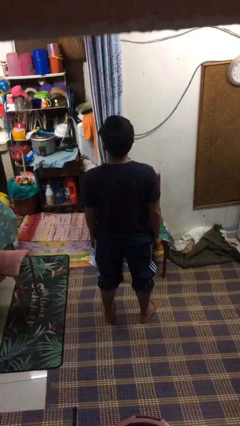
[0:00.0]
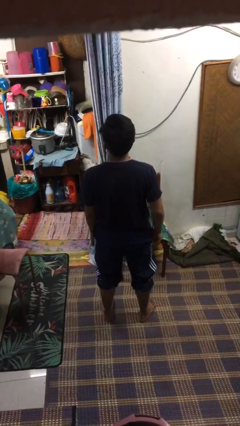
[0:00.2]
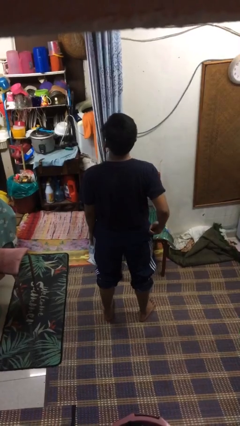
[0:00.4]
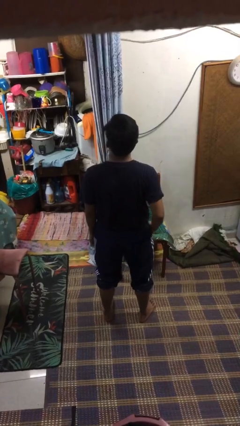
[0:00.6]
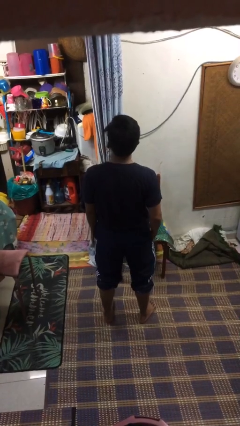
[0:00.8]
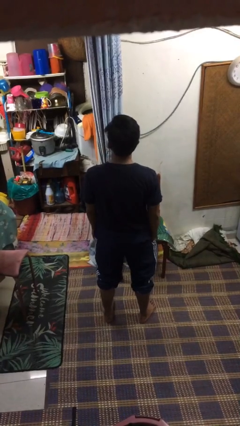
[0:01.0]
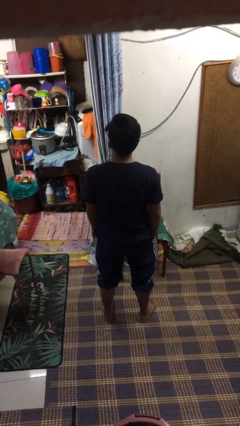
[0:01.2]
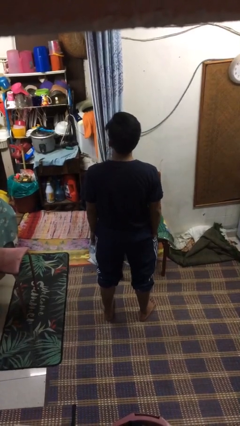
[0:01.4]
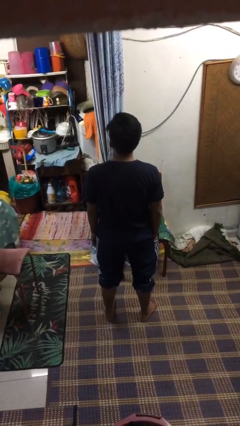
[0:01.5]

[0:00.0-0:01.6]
person puts hands in back pockets

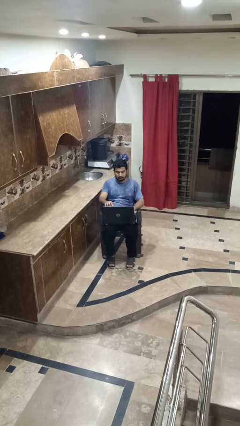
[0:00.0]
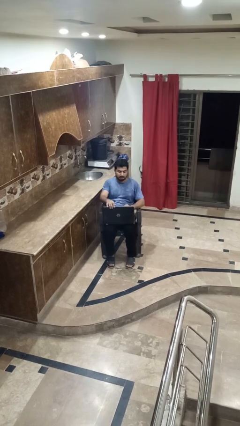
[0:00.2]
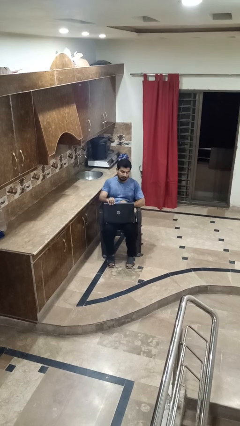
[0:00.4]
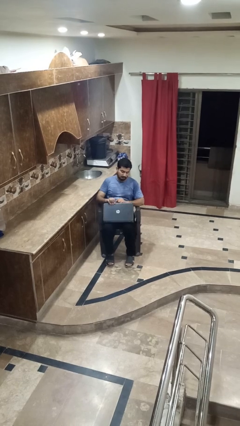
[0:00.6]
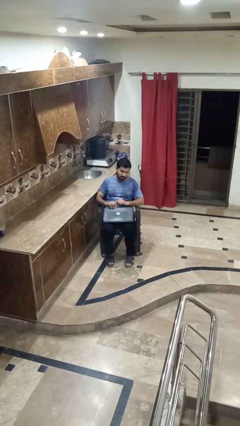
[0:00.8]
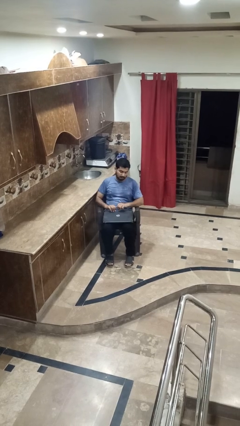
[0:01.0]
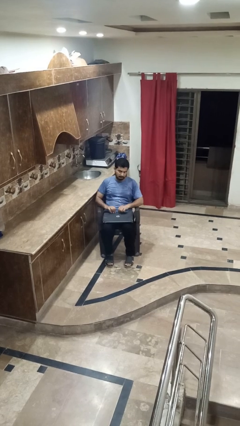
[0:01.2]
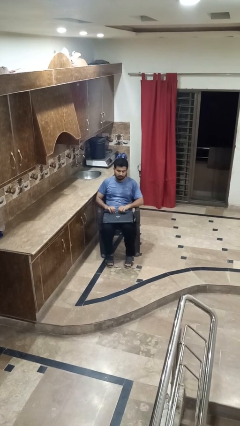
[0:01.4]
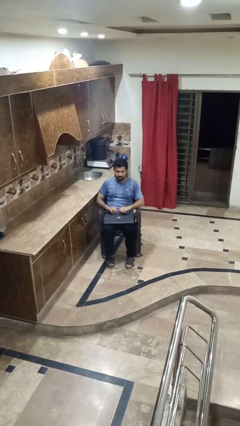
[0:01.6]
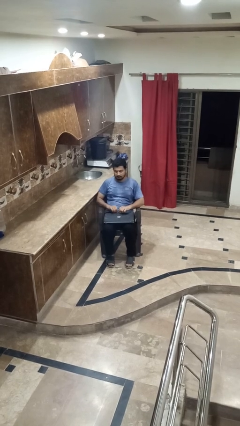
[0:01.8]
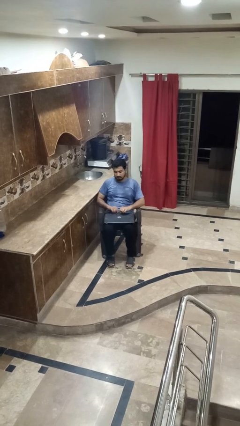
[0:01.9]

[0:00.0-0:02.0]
person closes laptop

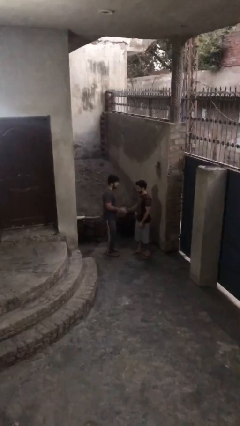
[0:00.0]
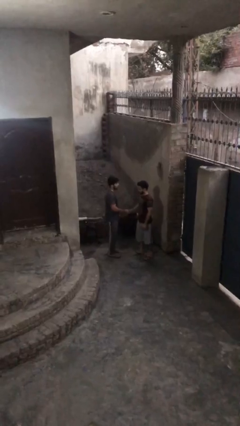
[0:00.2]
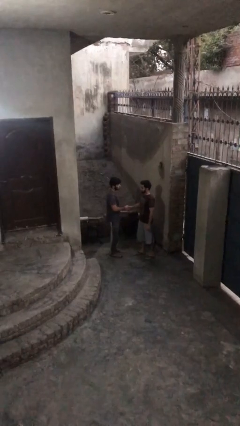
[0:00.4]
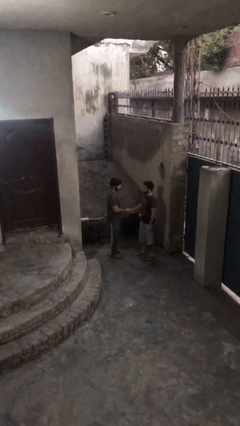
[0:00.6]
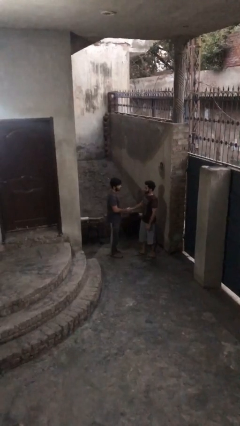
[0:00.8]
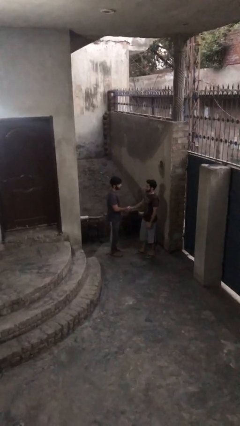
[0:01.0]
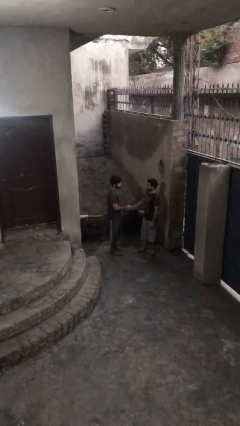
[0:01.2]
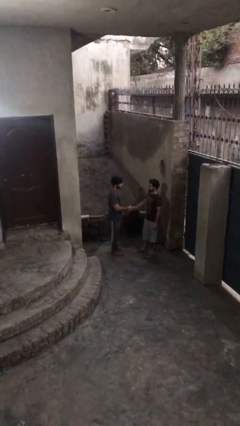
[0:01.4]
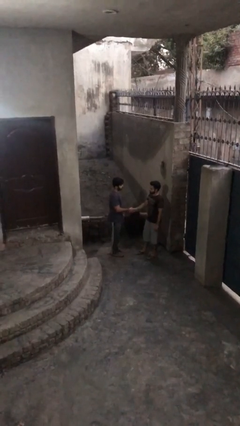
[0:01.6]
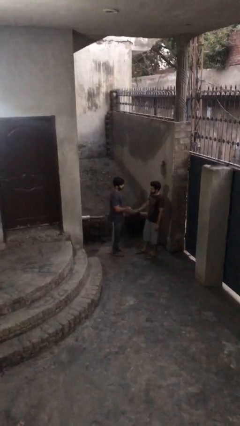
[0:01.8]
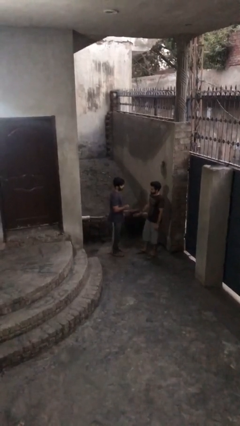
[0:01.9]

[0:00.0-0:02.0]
person shakes hand

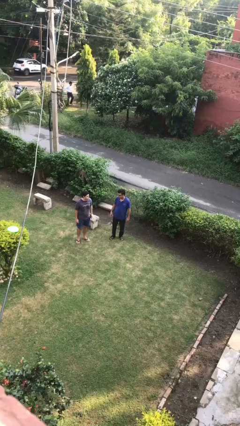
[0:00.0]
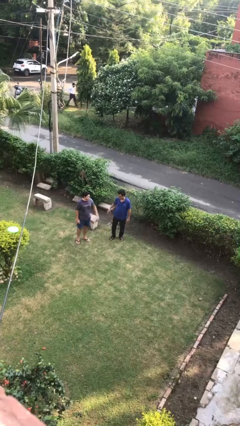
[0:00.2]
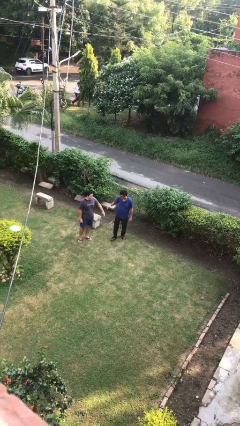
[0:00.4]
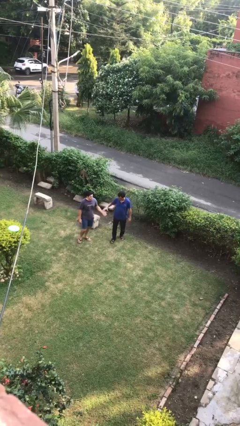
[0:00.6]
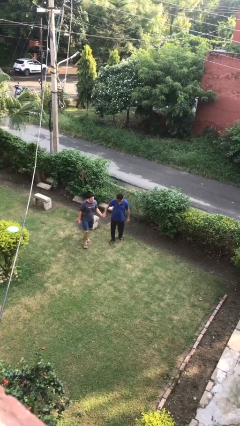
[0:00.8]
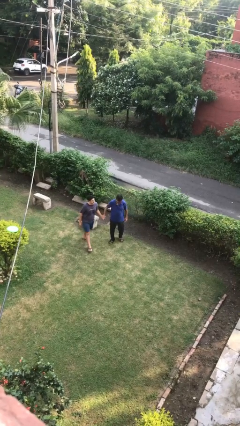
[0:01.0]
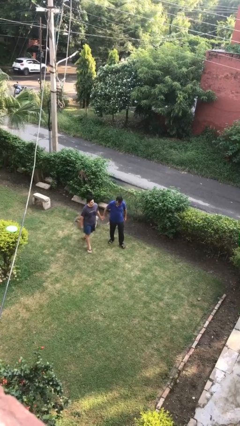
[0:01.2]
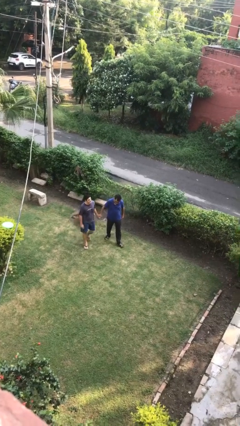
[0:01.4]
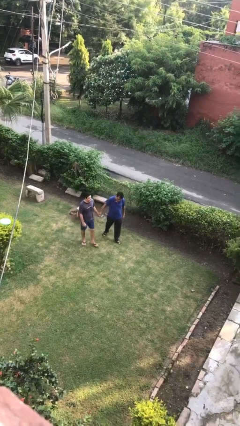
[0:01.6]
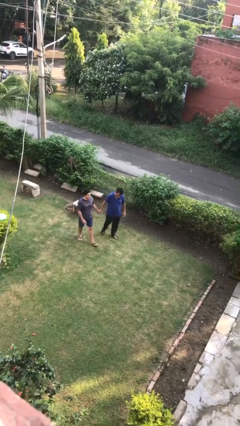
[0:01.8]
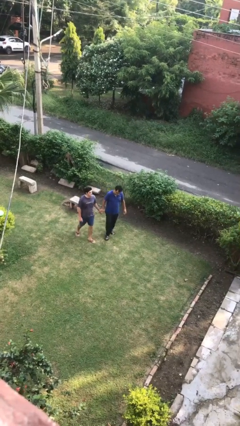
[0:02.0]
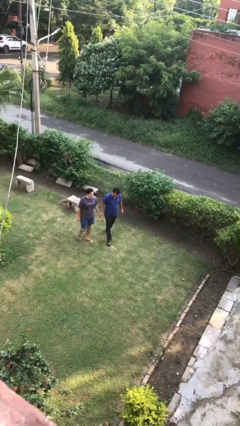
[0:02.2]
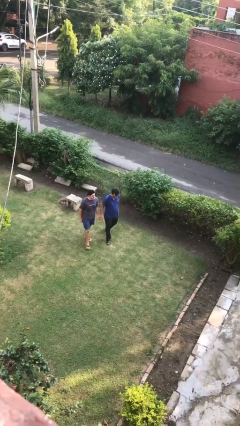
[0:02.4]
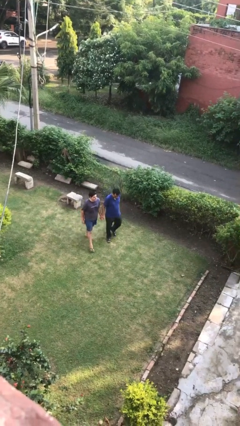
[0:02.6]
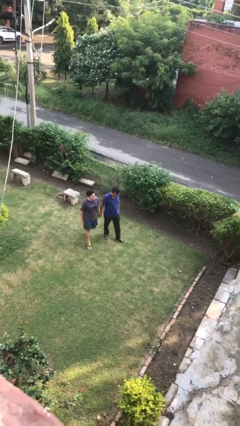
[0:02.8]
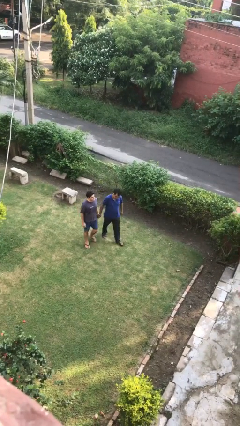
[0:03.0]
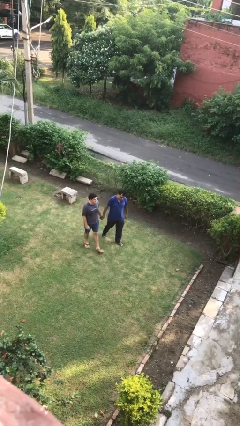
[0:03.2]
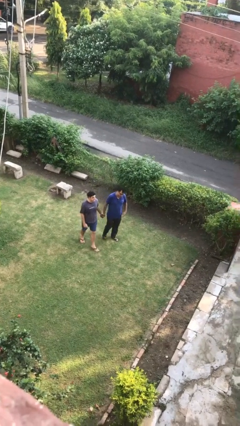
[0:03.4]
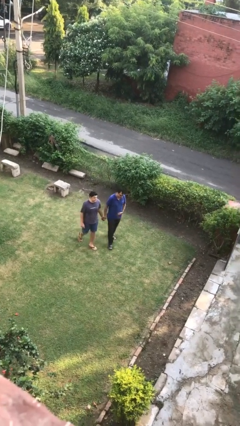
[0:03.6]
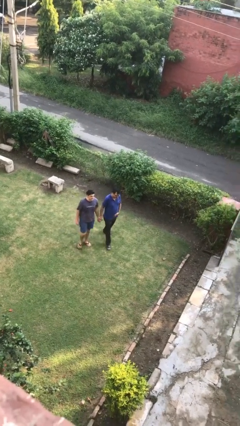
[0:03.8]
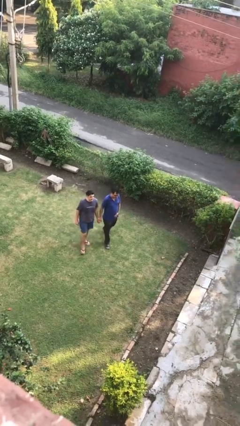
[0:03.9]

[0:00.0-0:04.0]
person holds hand

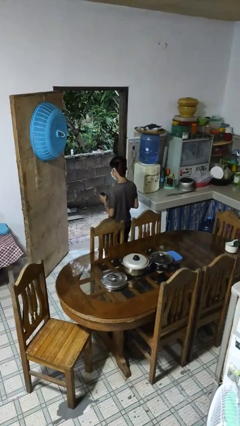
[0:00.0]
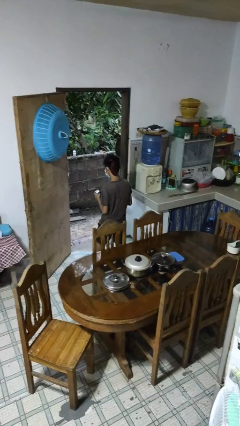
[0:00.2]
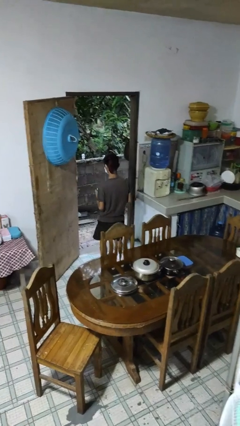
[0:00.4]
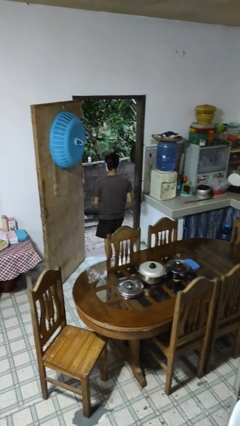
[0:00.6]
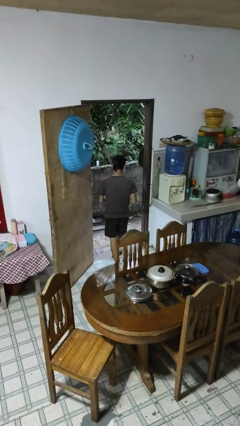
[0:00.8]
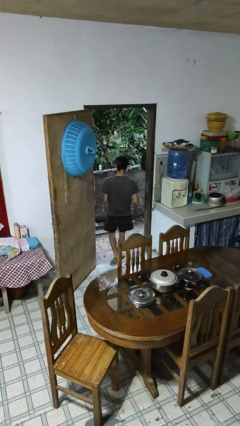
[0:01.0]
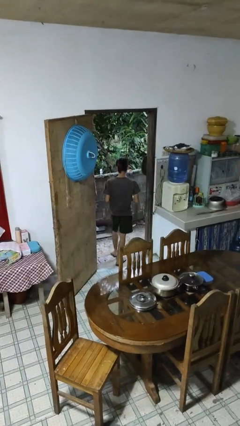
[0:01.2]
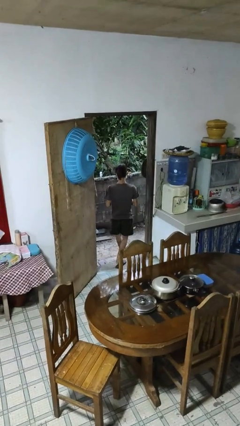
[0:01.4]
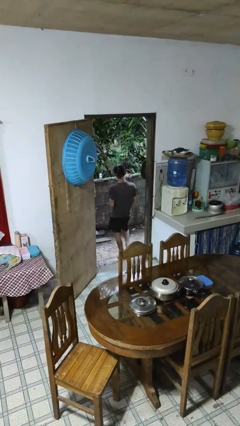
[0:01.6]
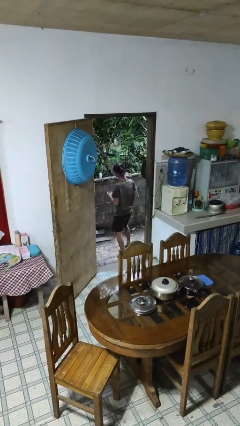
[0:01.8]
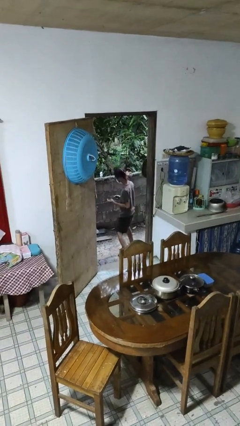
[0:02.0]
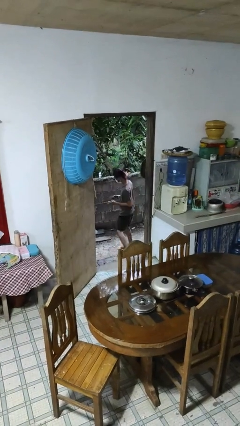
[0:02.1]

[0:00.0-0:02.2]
person exits scene through structure

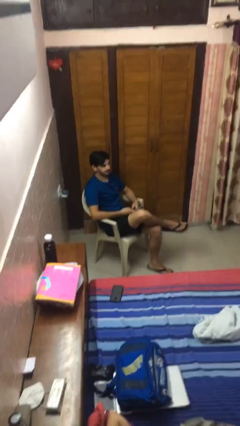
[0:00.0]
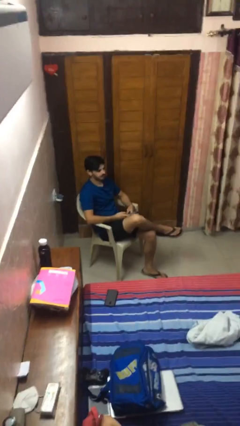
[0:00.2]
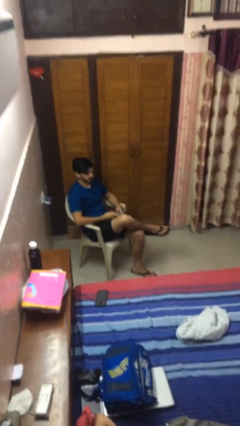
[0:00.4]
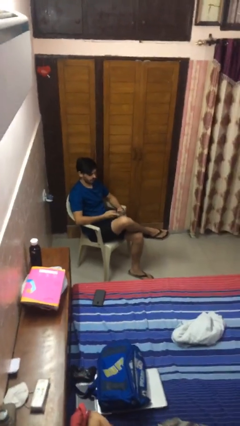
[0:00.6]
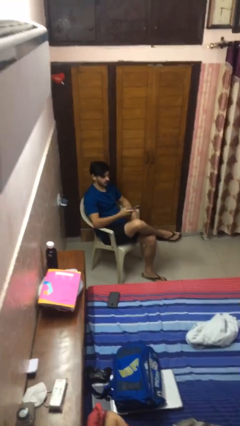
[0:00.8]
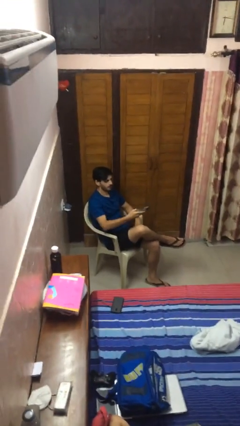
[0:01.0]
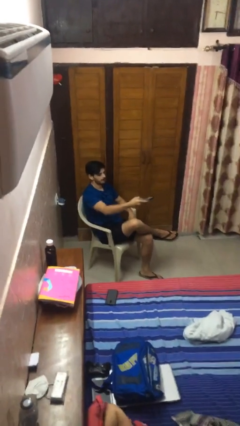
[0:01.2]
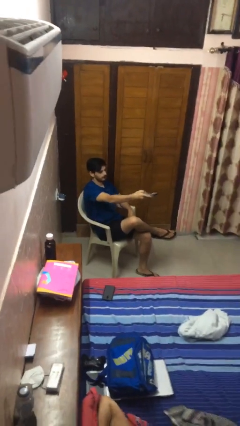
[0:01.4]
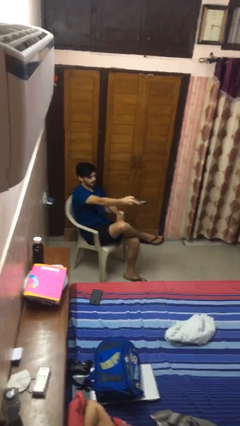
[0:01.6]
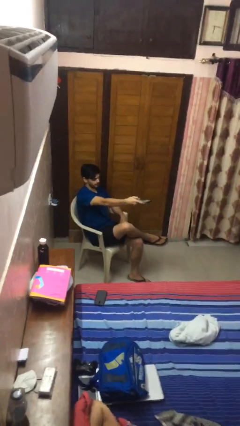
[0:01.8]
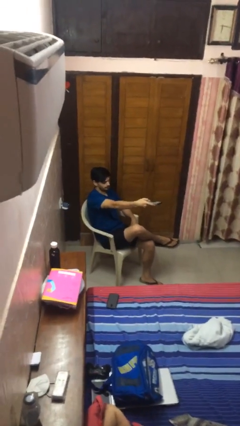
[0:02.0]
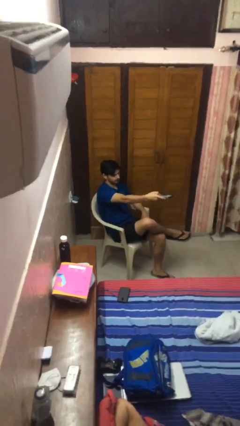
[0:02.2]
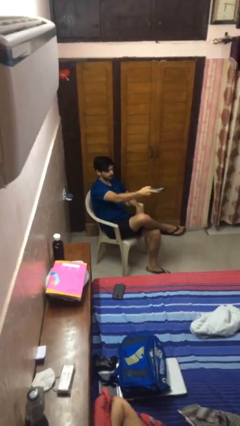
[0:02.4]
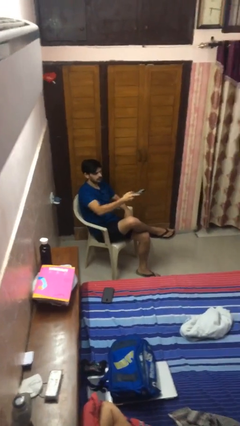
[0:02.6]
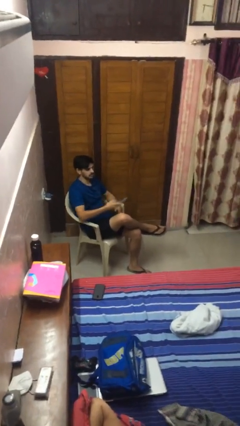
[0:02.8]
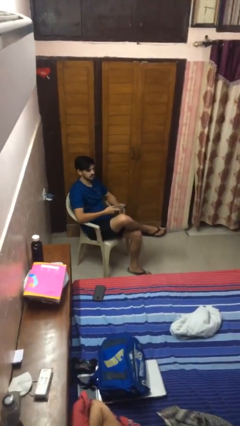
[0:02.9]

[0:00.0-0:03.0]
person uses television remote

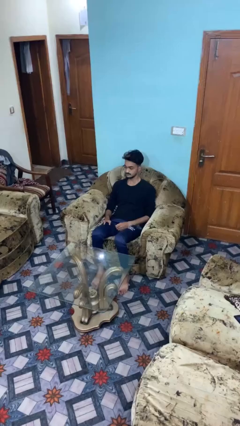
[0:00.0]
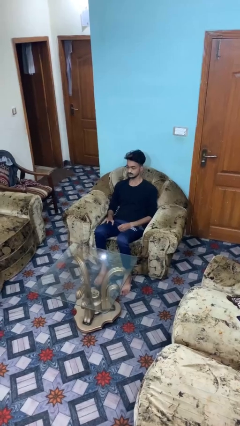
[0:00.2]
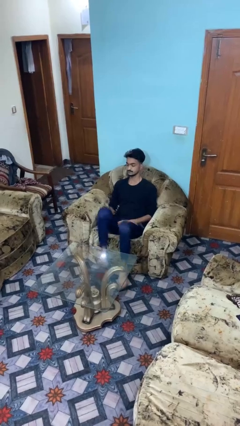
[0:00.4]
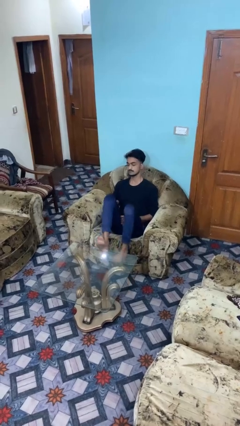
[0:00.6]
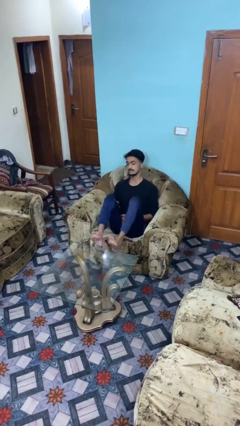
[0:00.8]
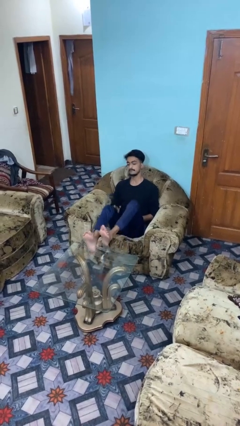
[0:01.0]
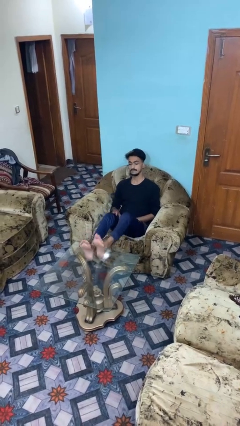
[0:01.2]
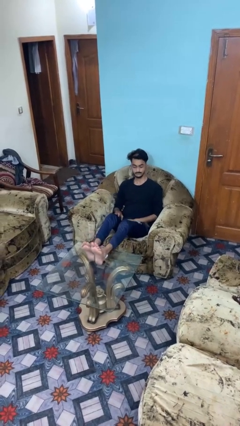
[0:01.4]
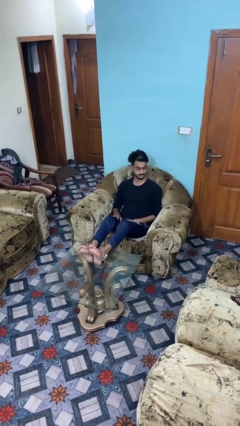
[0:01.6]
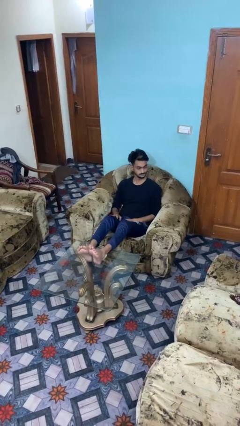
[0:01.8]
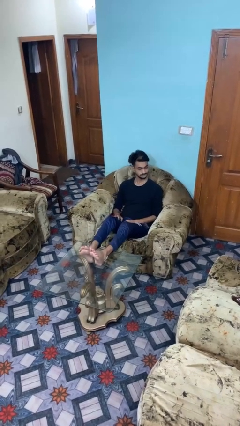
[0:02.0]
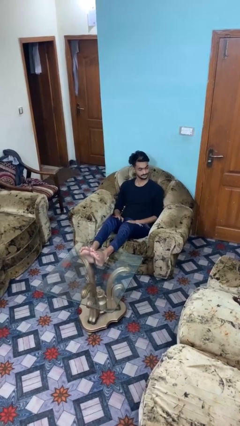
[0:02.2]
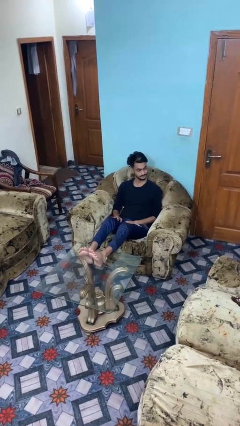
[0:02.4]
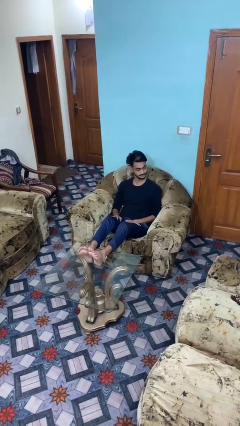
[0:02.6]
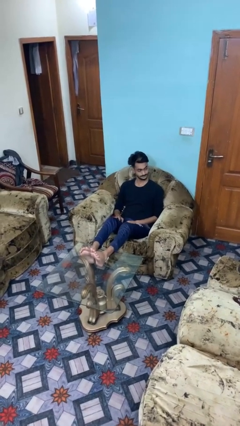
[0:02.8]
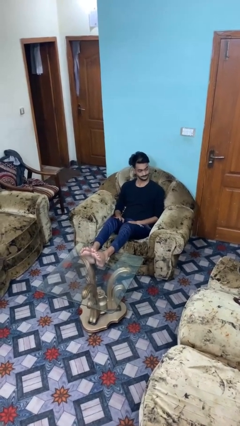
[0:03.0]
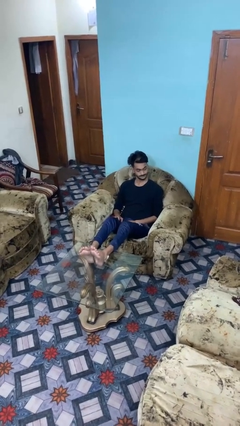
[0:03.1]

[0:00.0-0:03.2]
person puts feet up
